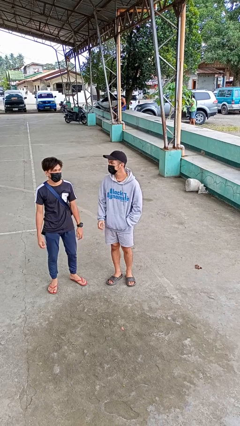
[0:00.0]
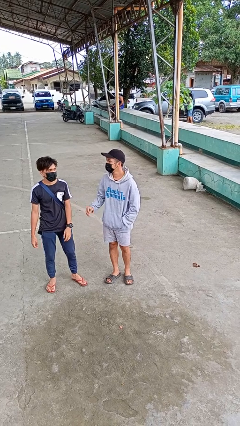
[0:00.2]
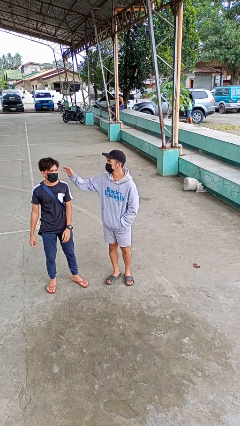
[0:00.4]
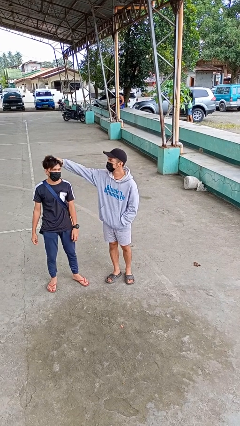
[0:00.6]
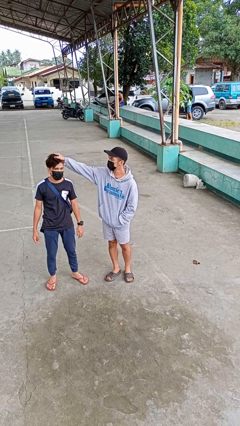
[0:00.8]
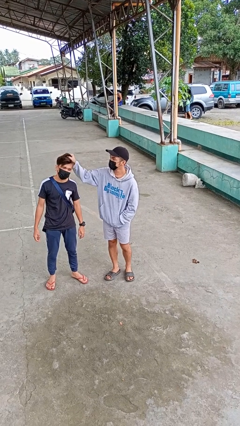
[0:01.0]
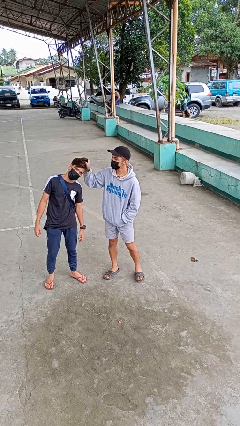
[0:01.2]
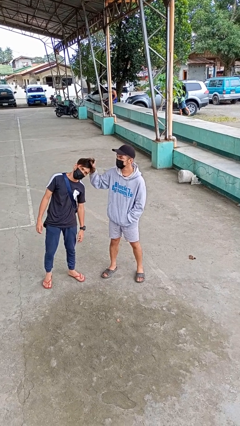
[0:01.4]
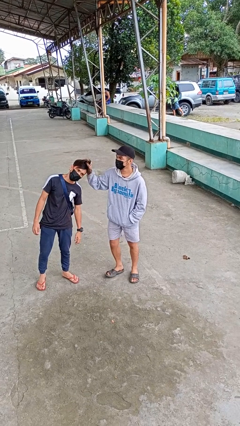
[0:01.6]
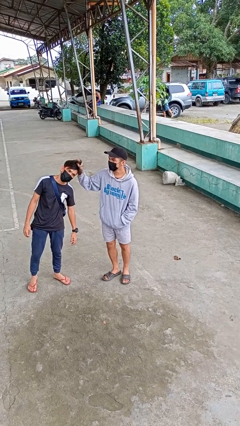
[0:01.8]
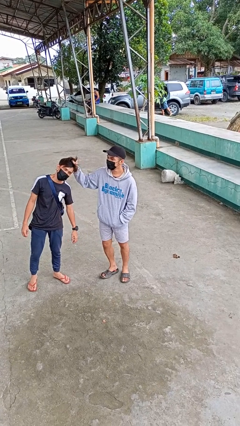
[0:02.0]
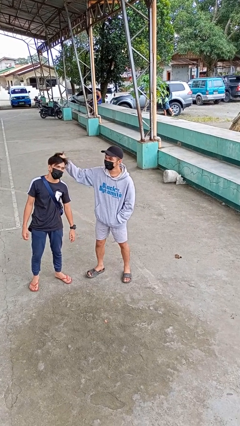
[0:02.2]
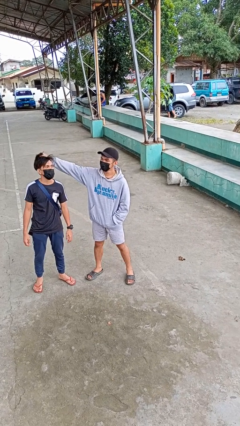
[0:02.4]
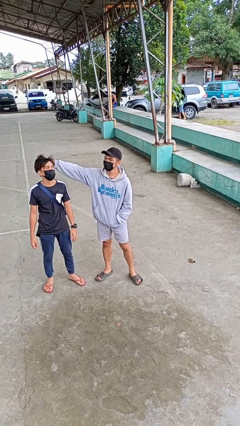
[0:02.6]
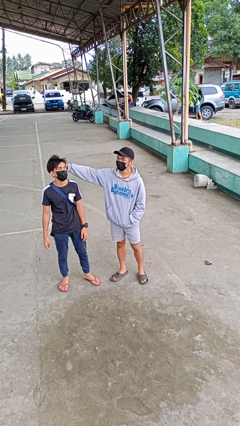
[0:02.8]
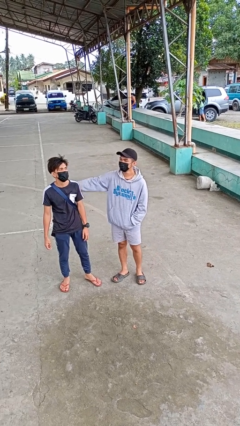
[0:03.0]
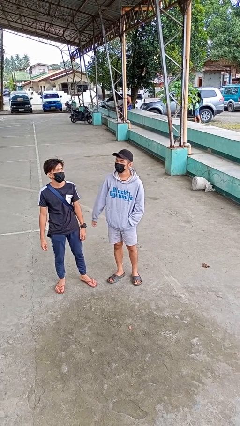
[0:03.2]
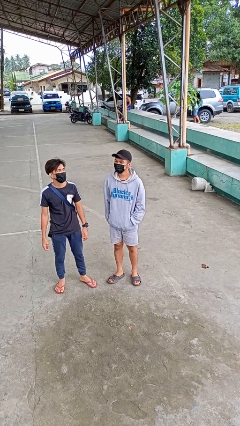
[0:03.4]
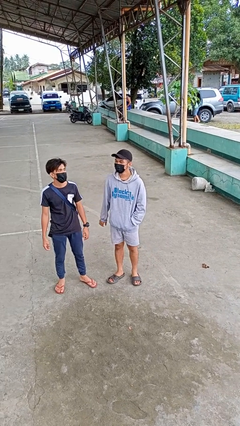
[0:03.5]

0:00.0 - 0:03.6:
person grabs person by hair

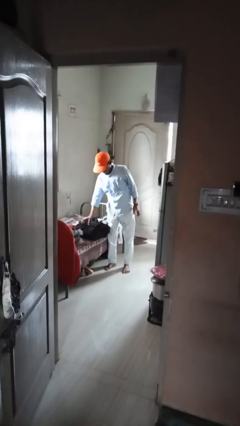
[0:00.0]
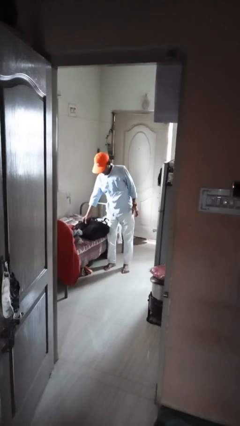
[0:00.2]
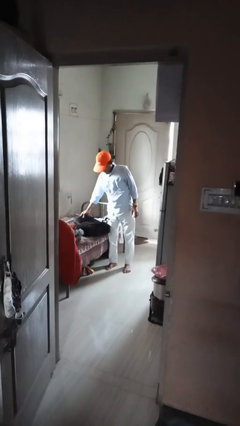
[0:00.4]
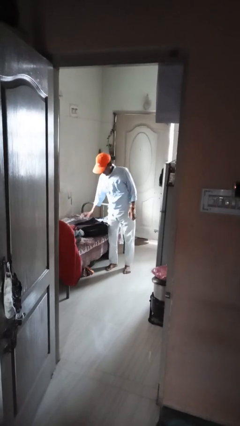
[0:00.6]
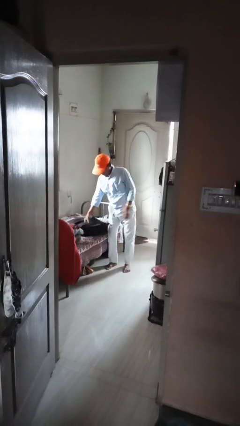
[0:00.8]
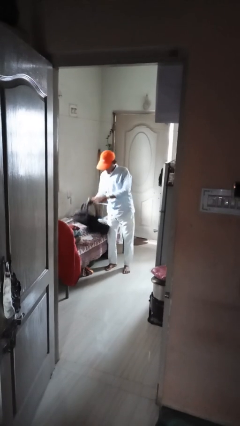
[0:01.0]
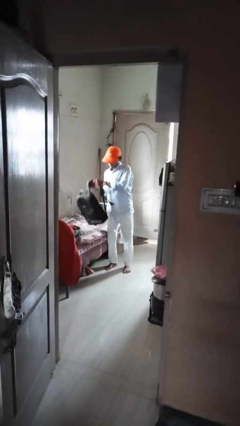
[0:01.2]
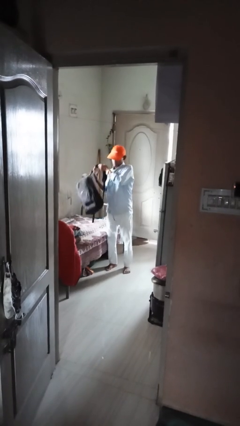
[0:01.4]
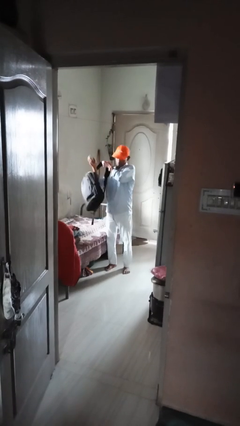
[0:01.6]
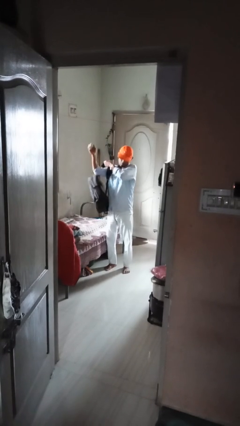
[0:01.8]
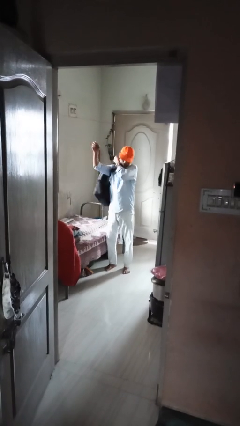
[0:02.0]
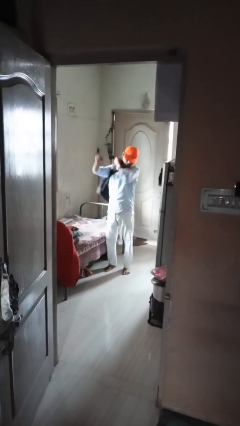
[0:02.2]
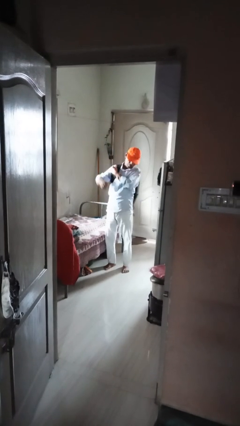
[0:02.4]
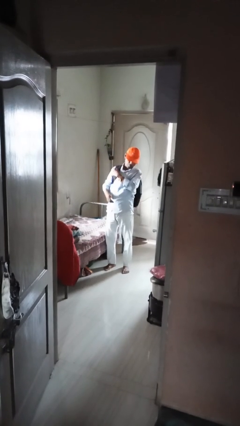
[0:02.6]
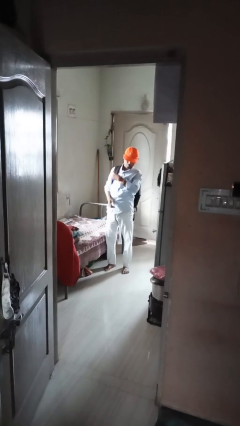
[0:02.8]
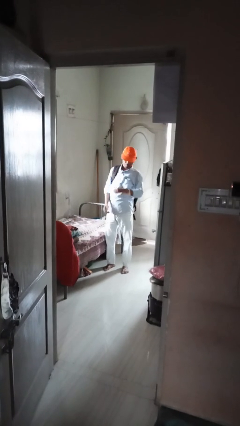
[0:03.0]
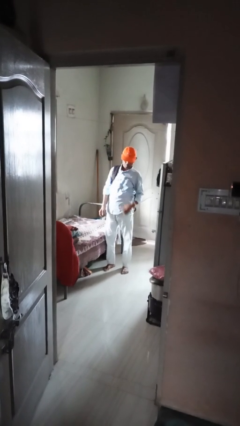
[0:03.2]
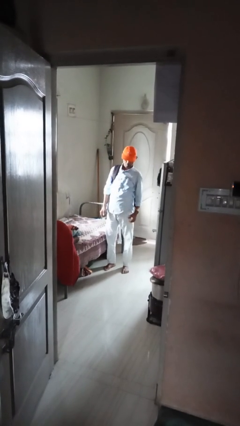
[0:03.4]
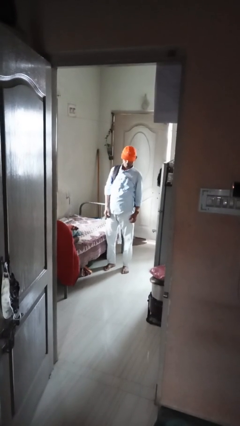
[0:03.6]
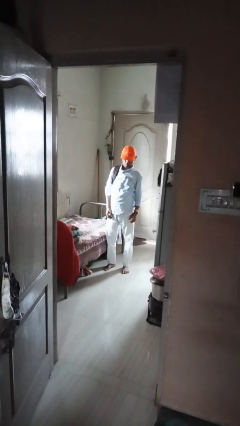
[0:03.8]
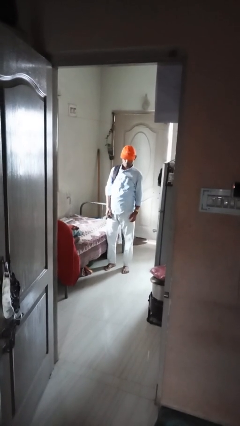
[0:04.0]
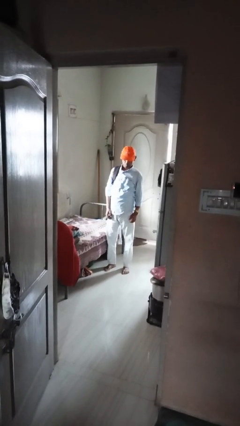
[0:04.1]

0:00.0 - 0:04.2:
person puts on backpack

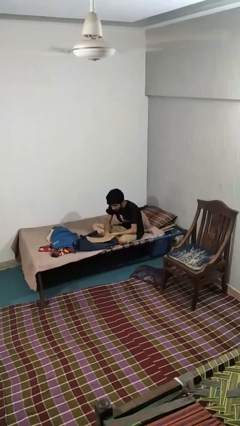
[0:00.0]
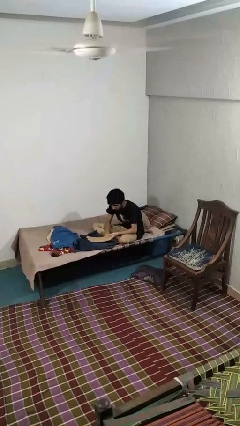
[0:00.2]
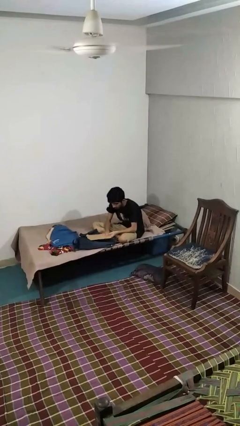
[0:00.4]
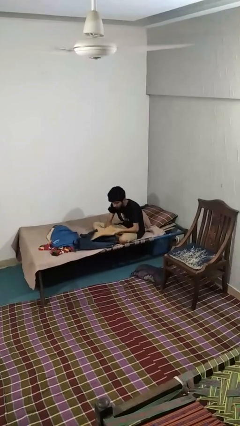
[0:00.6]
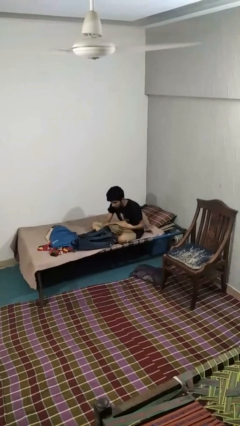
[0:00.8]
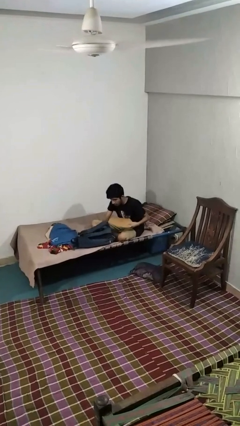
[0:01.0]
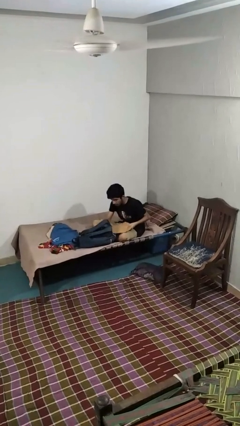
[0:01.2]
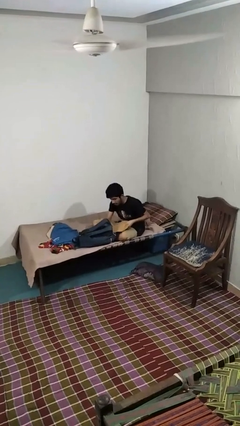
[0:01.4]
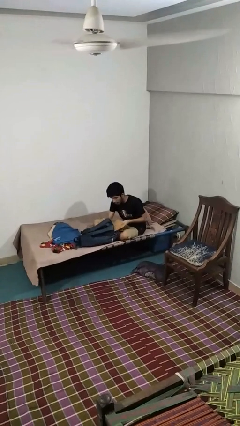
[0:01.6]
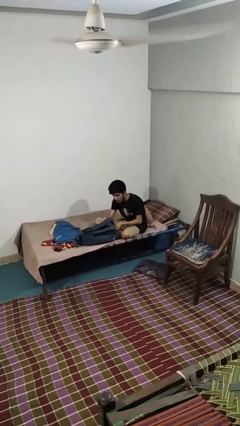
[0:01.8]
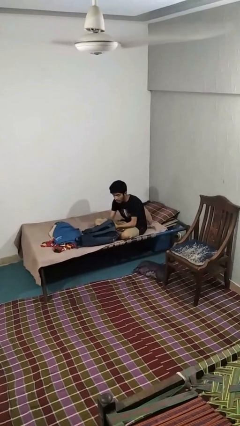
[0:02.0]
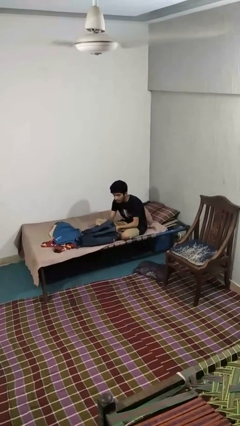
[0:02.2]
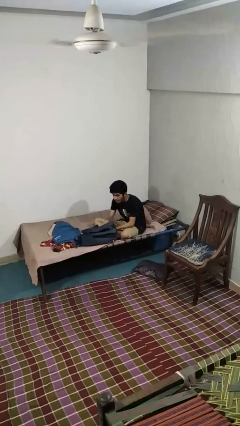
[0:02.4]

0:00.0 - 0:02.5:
person puts object into backpack

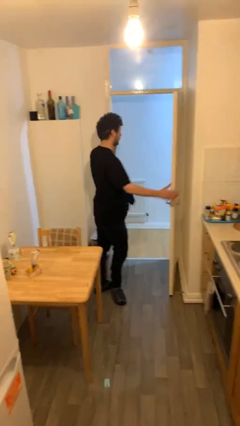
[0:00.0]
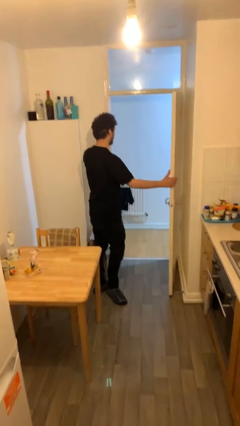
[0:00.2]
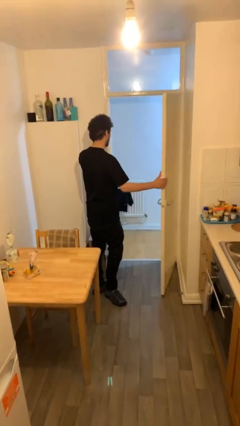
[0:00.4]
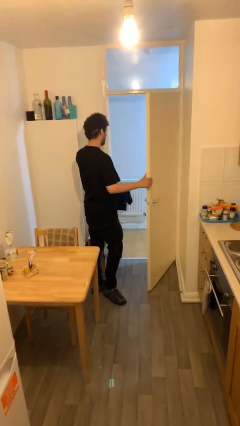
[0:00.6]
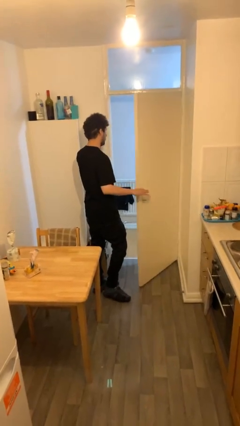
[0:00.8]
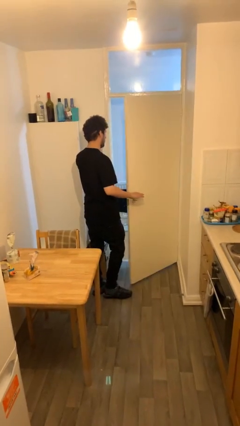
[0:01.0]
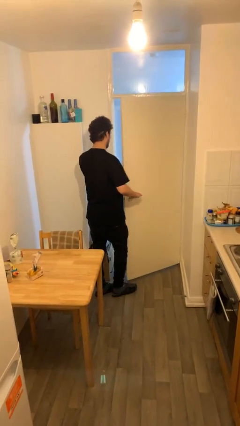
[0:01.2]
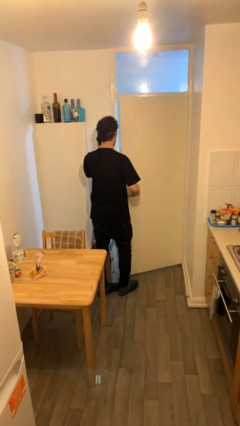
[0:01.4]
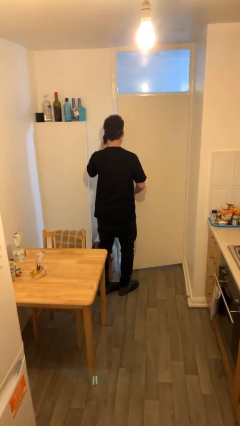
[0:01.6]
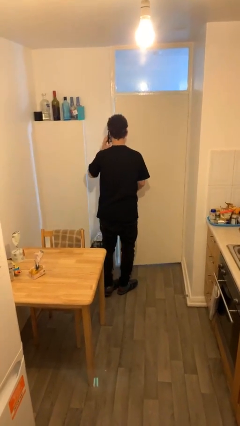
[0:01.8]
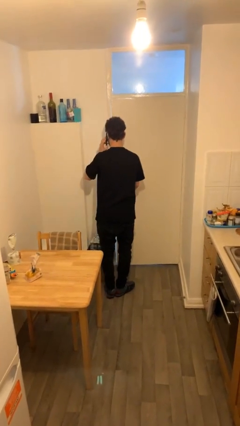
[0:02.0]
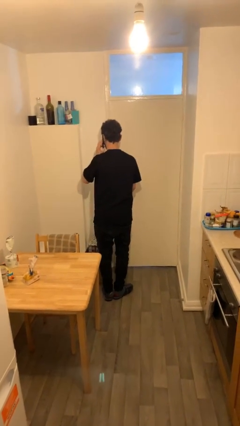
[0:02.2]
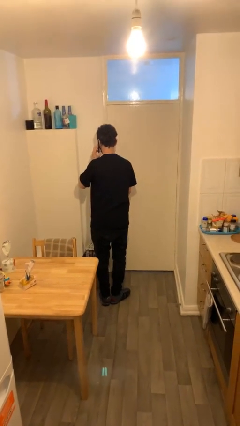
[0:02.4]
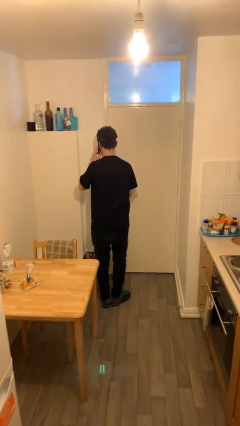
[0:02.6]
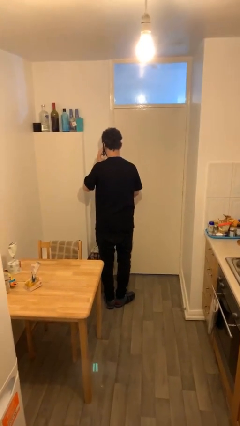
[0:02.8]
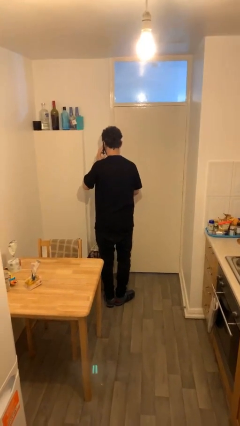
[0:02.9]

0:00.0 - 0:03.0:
person closes facility door

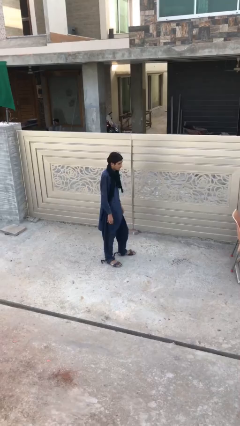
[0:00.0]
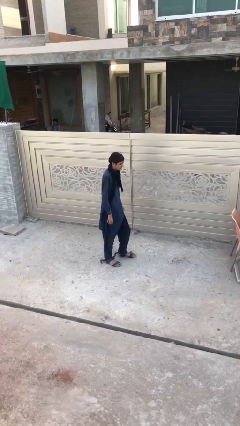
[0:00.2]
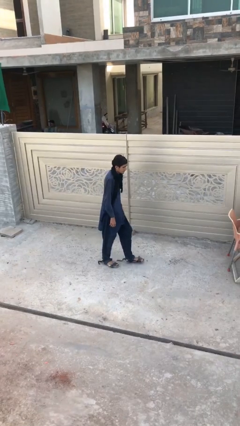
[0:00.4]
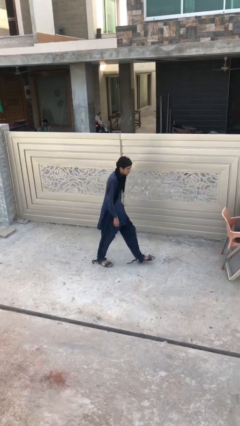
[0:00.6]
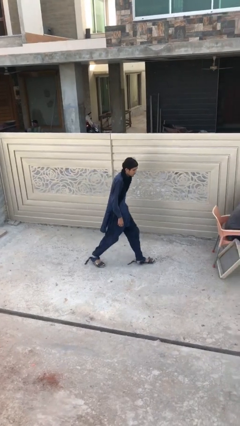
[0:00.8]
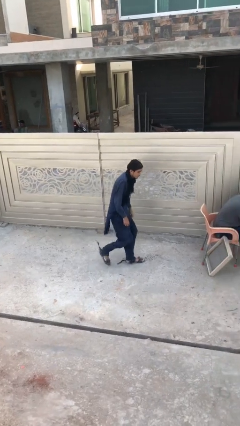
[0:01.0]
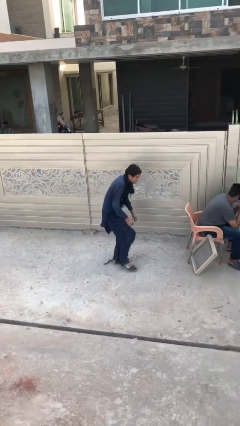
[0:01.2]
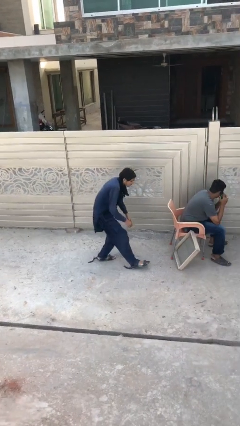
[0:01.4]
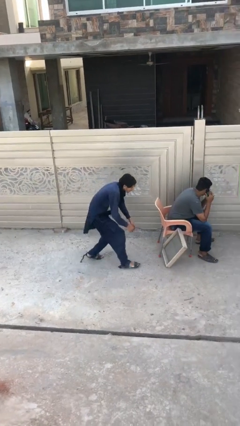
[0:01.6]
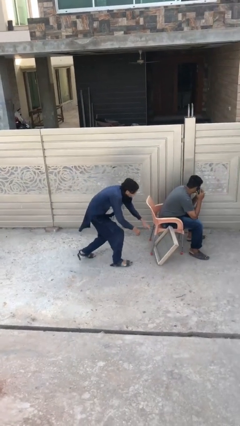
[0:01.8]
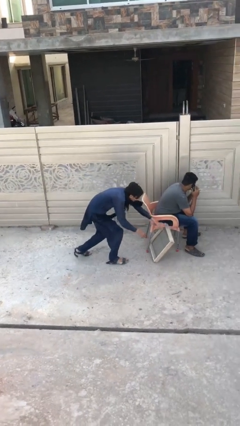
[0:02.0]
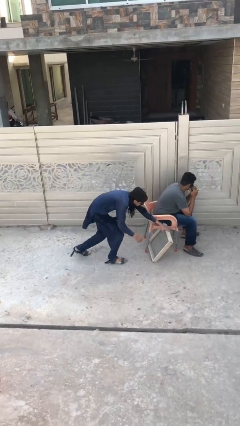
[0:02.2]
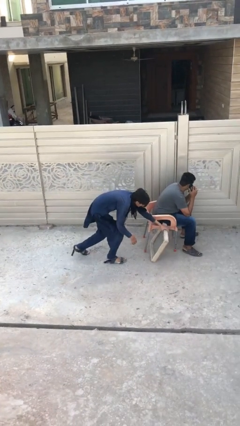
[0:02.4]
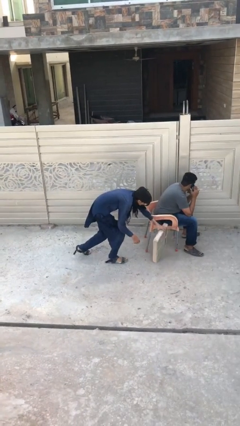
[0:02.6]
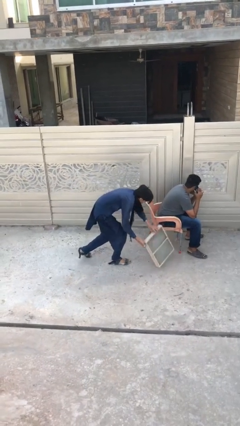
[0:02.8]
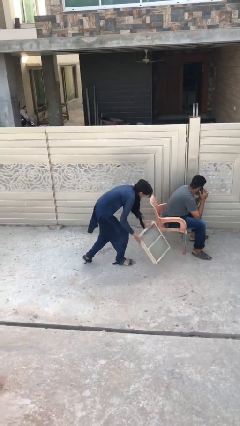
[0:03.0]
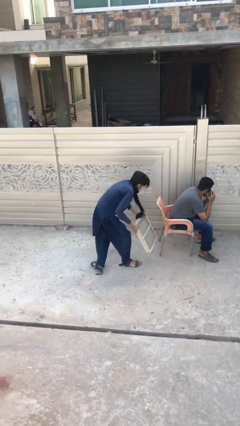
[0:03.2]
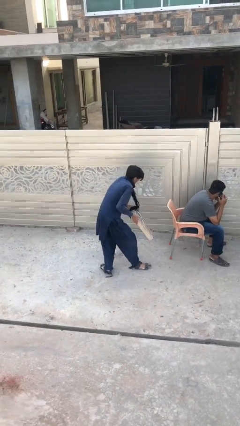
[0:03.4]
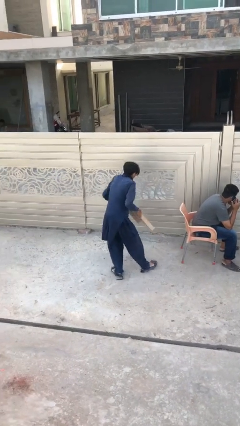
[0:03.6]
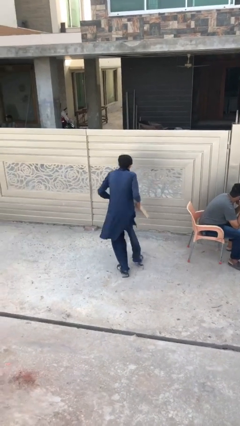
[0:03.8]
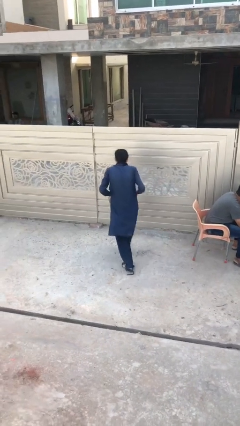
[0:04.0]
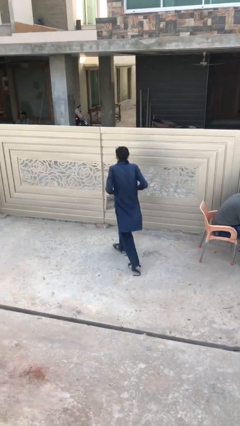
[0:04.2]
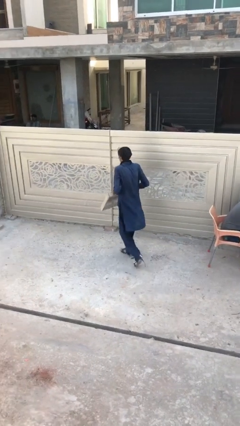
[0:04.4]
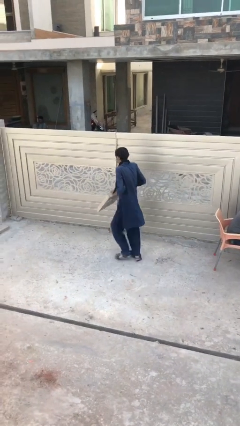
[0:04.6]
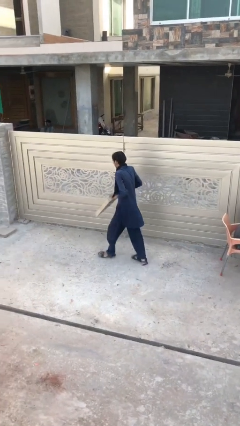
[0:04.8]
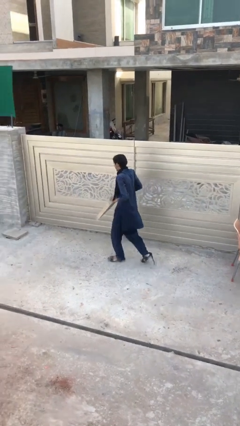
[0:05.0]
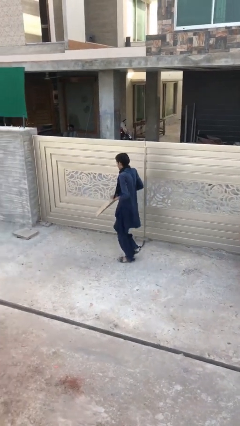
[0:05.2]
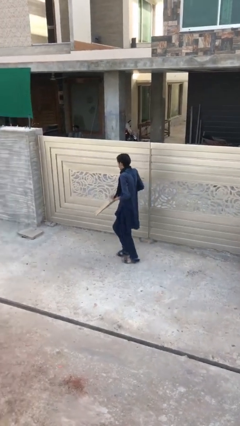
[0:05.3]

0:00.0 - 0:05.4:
person steals object from person
